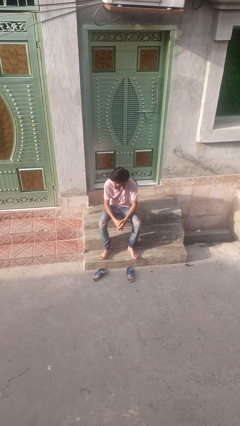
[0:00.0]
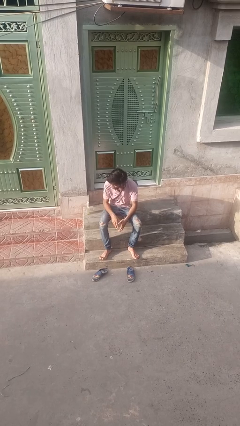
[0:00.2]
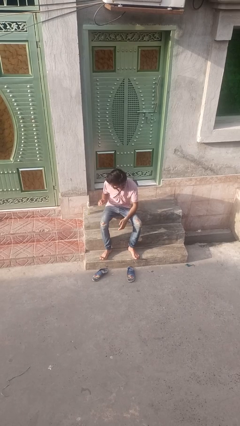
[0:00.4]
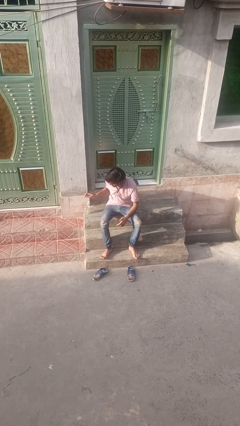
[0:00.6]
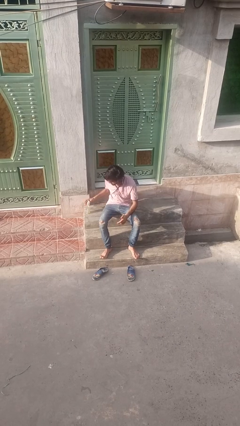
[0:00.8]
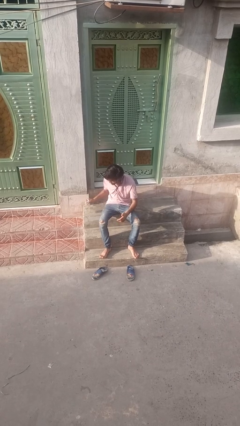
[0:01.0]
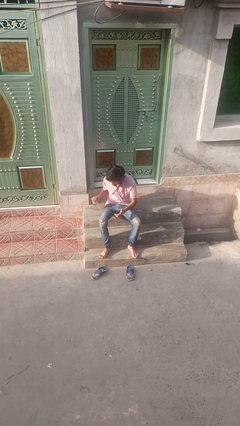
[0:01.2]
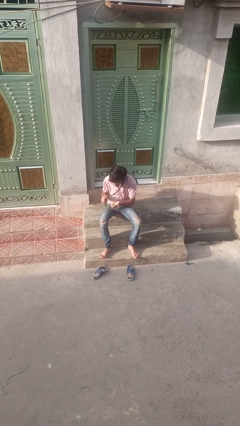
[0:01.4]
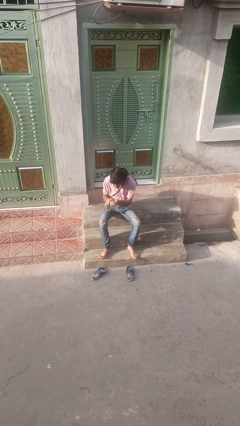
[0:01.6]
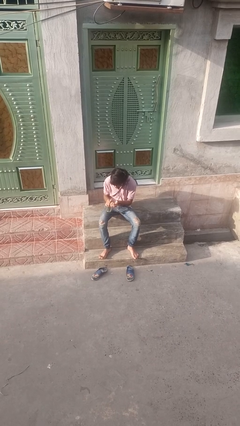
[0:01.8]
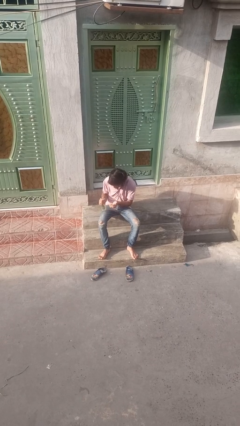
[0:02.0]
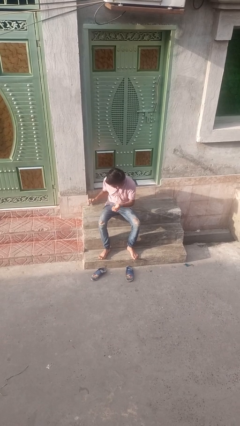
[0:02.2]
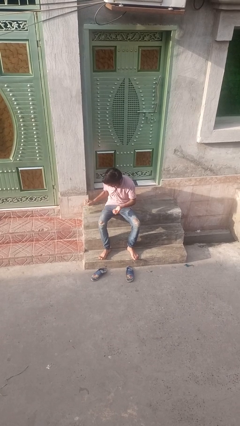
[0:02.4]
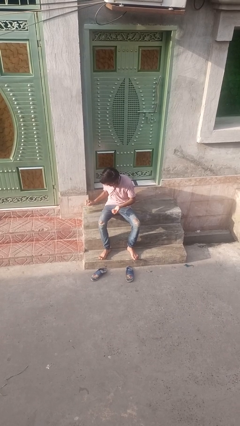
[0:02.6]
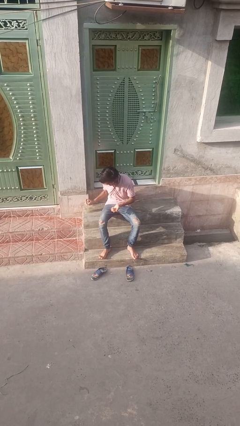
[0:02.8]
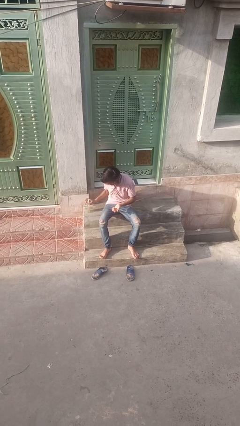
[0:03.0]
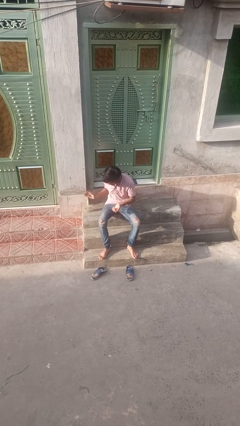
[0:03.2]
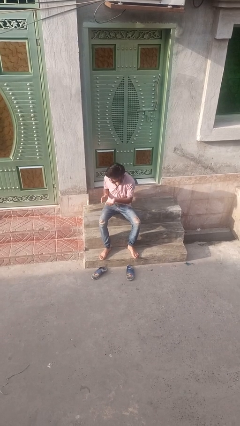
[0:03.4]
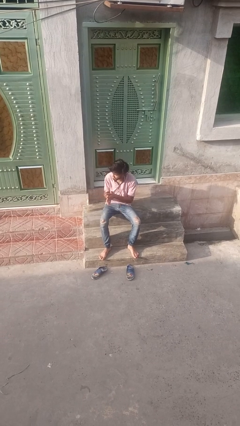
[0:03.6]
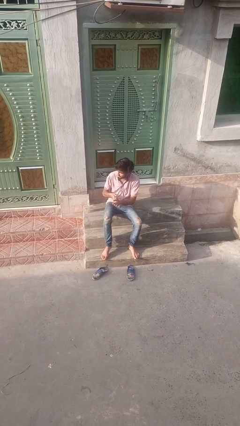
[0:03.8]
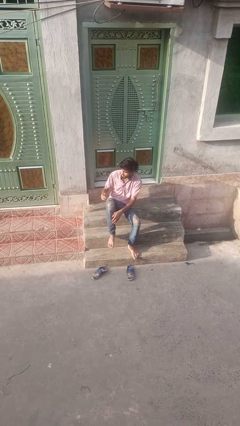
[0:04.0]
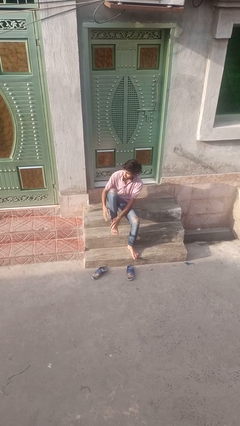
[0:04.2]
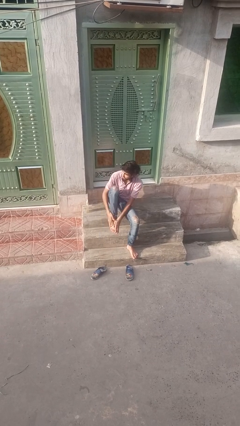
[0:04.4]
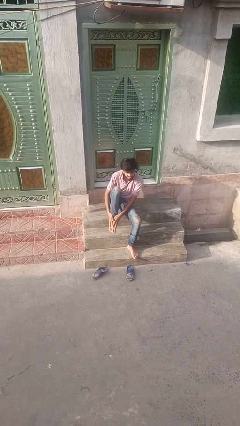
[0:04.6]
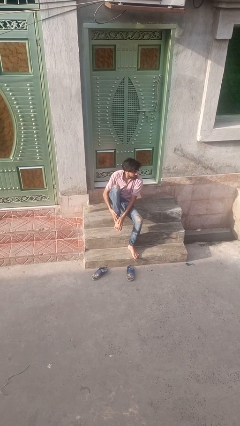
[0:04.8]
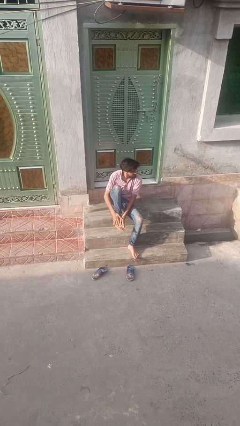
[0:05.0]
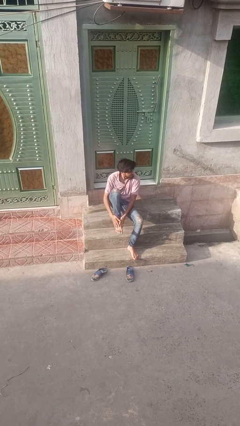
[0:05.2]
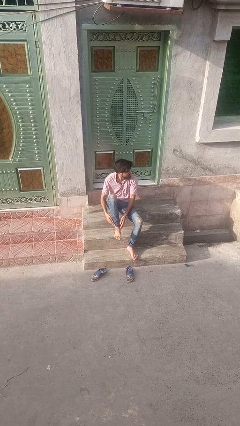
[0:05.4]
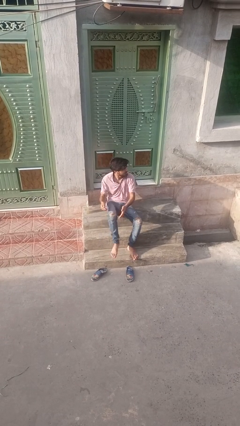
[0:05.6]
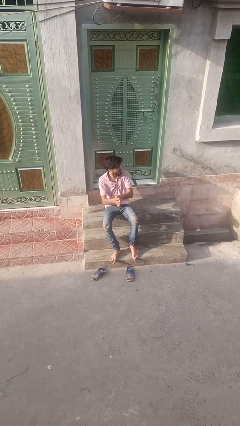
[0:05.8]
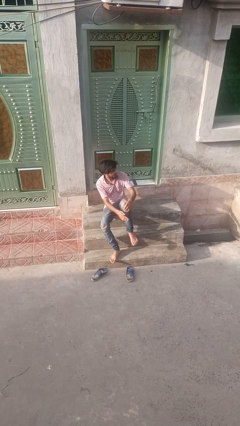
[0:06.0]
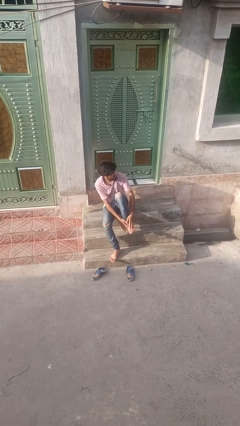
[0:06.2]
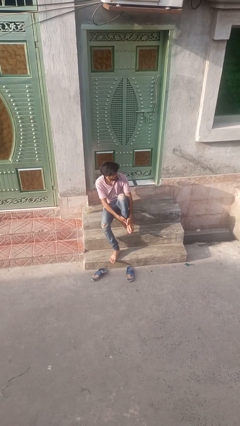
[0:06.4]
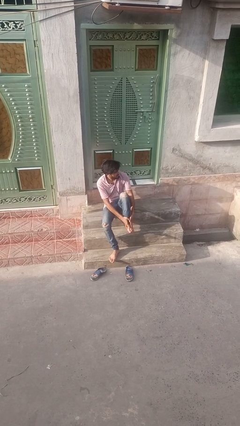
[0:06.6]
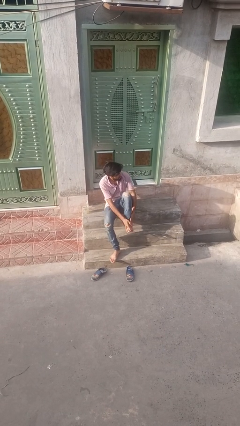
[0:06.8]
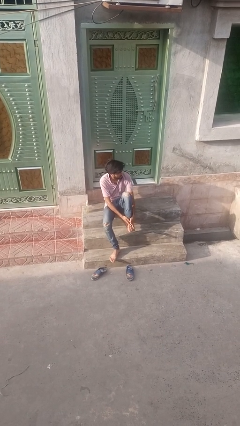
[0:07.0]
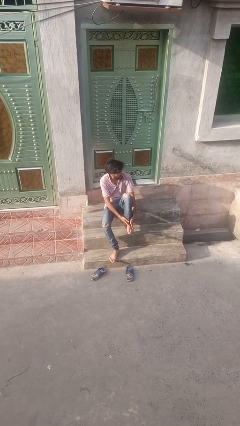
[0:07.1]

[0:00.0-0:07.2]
person applies facial moisturizer

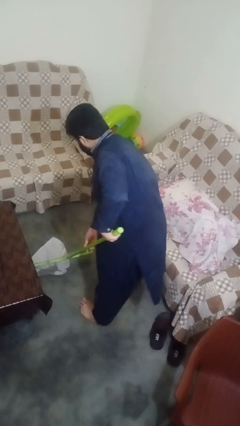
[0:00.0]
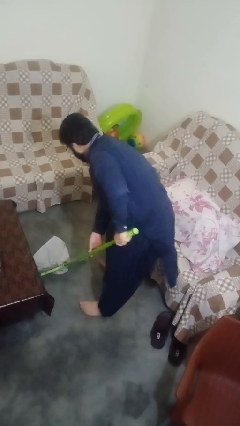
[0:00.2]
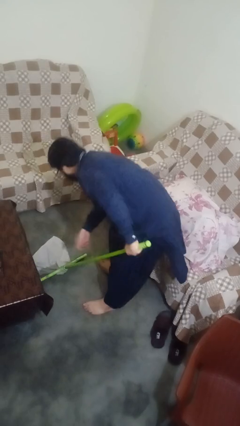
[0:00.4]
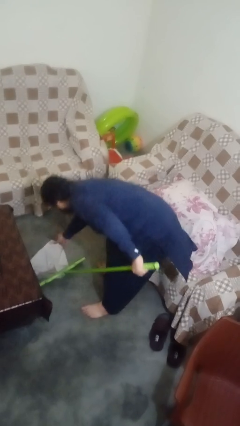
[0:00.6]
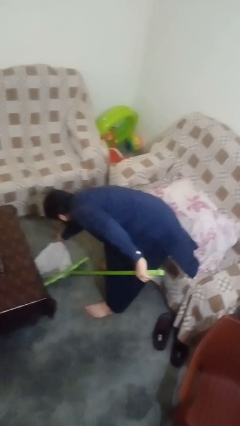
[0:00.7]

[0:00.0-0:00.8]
person mops

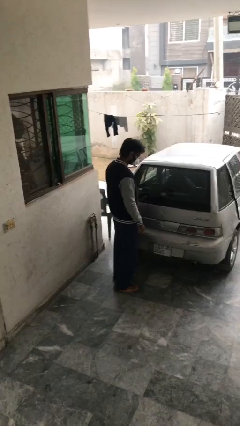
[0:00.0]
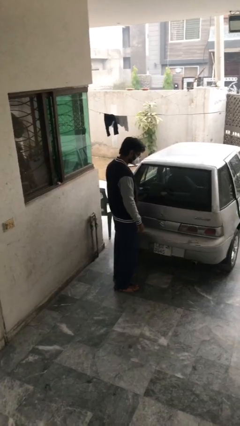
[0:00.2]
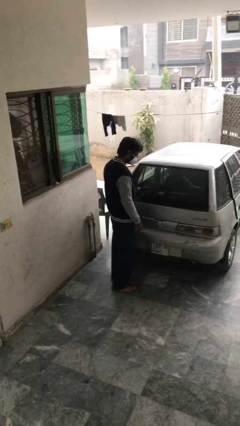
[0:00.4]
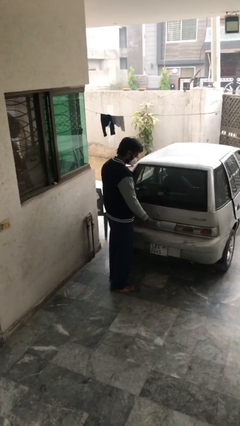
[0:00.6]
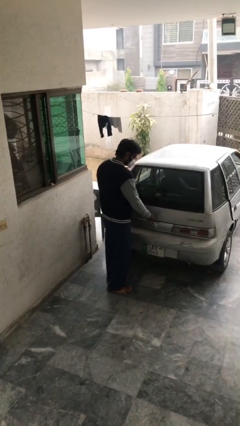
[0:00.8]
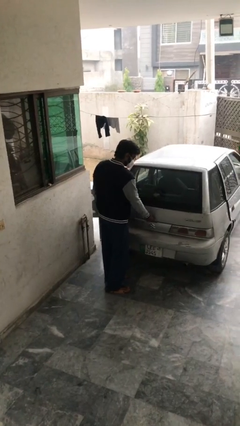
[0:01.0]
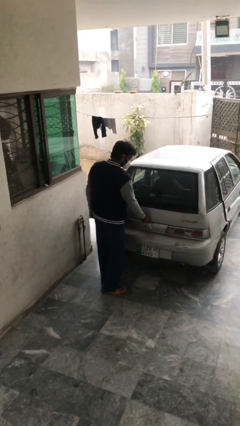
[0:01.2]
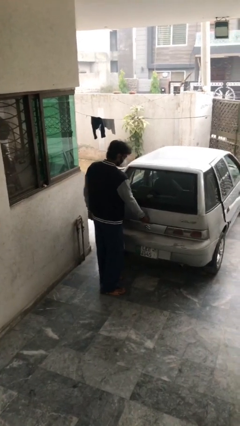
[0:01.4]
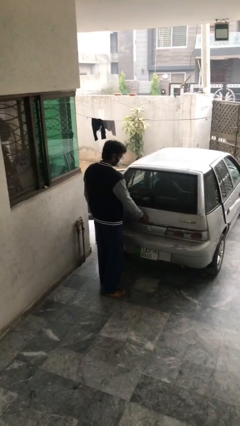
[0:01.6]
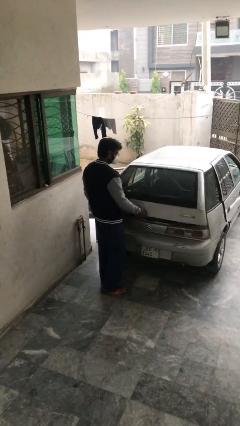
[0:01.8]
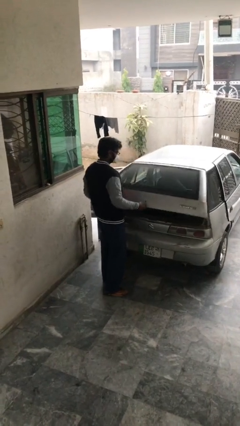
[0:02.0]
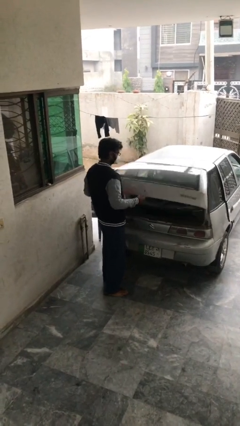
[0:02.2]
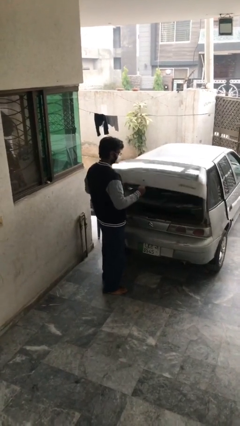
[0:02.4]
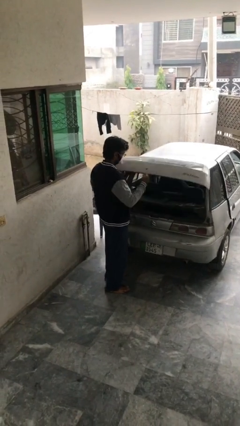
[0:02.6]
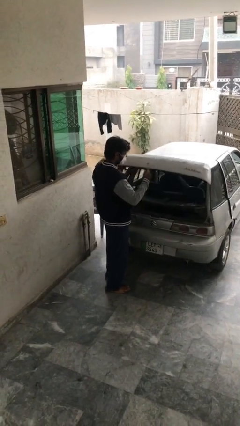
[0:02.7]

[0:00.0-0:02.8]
person opens car trunk

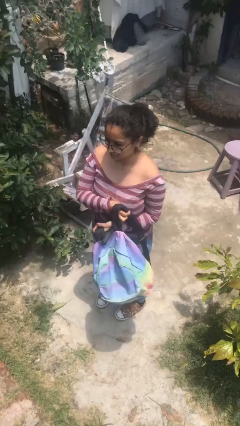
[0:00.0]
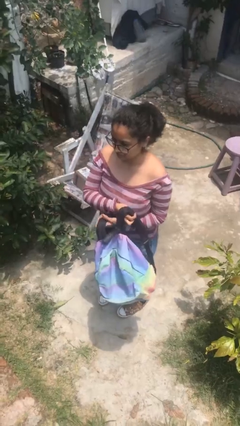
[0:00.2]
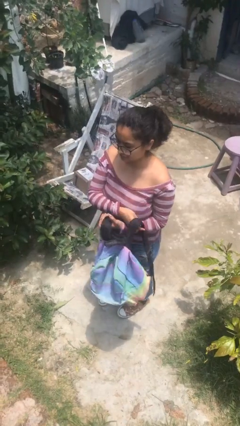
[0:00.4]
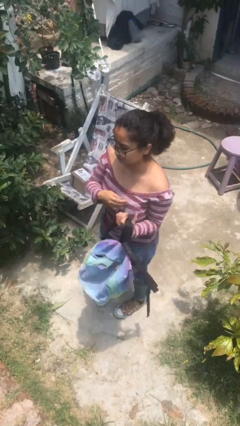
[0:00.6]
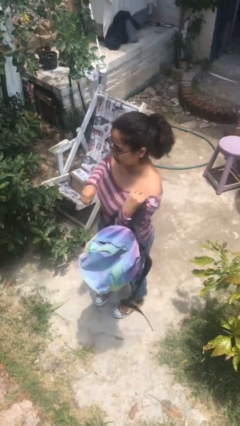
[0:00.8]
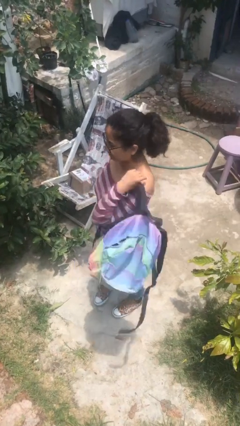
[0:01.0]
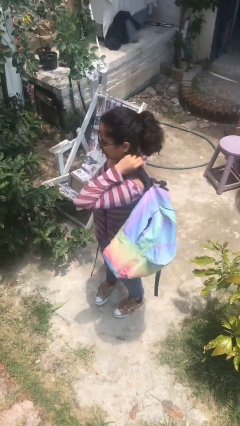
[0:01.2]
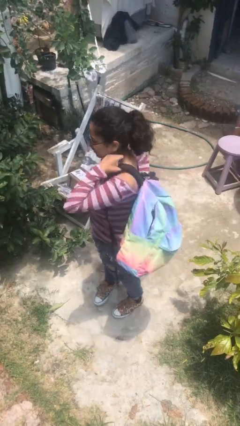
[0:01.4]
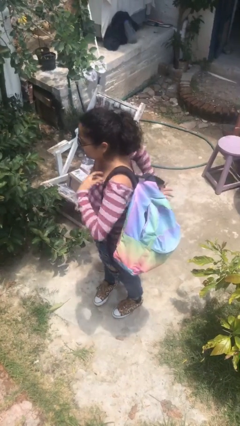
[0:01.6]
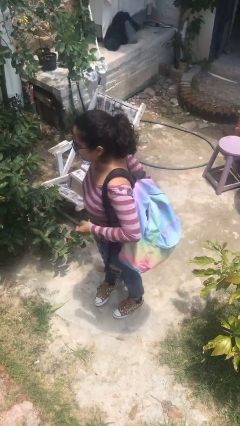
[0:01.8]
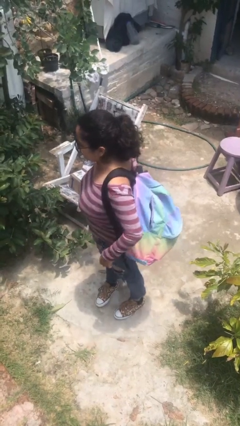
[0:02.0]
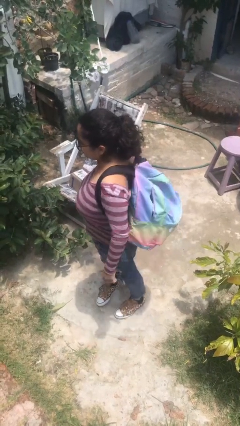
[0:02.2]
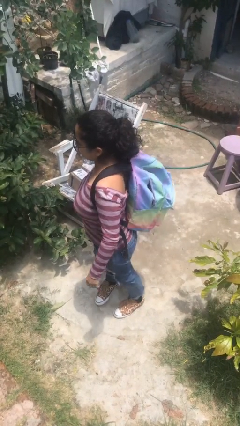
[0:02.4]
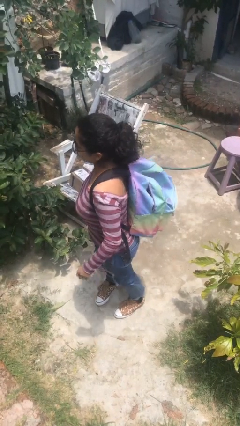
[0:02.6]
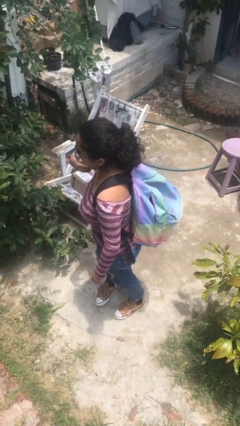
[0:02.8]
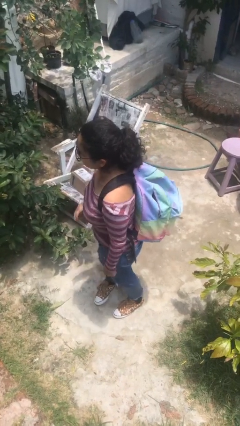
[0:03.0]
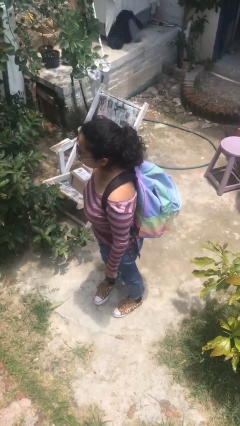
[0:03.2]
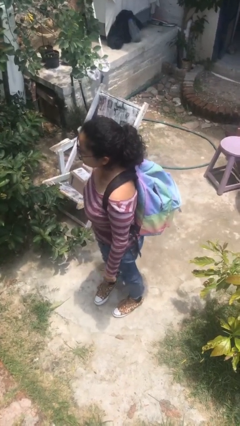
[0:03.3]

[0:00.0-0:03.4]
person puts on backpack

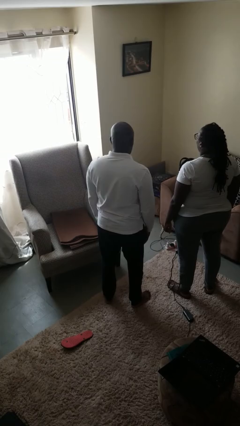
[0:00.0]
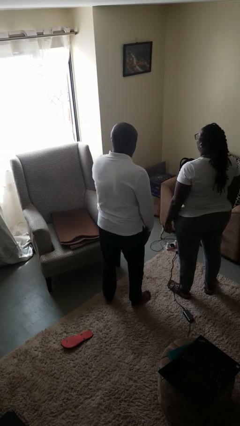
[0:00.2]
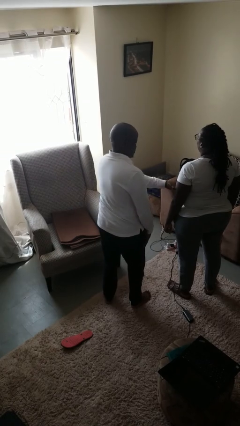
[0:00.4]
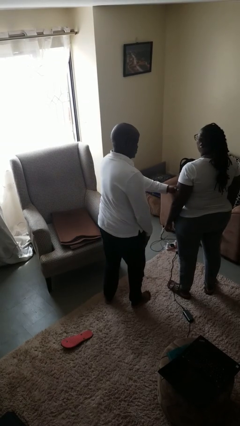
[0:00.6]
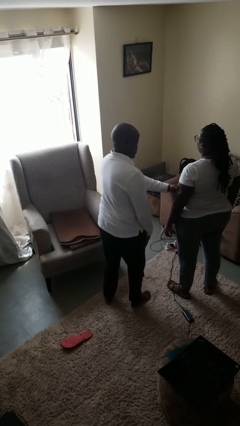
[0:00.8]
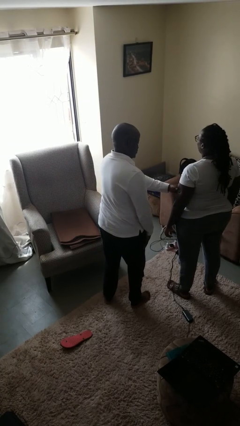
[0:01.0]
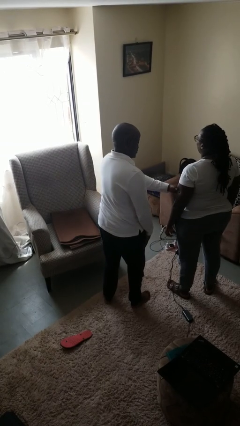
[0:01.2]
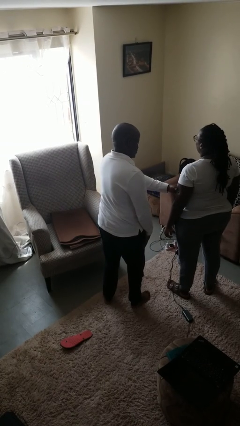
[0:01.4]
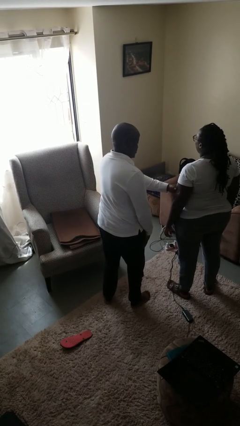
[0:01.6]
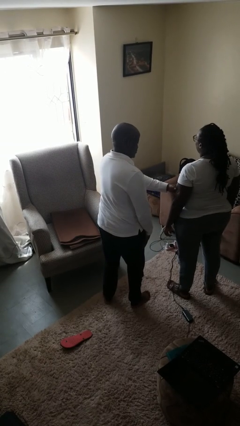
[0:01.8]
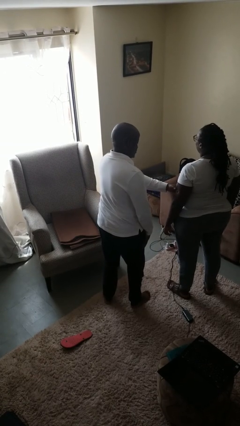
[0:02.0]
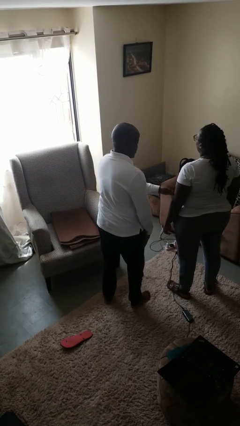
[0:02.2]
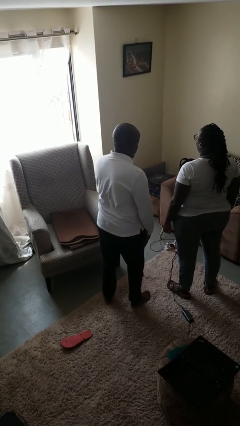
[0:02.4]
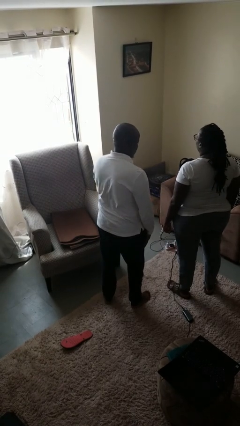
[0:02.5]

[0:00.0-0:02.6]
person grabs person by bicep

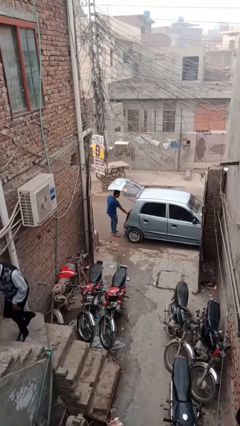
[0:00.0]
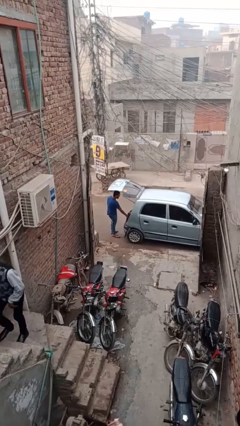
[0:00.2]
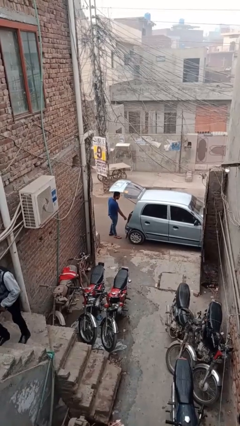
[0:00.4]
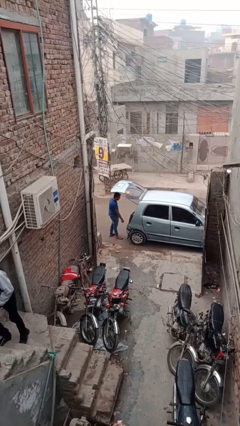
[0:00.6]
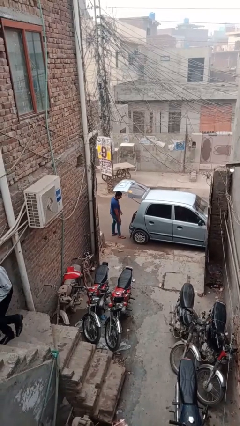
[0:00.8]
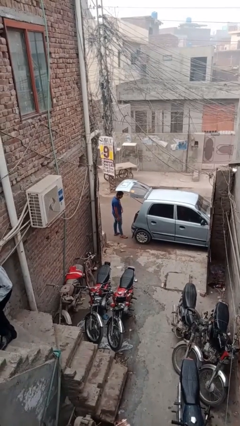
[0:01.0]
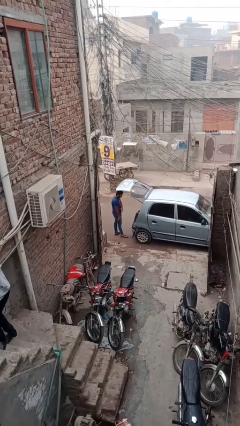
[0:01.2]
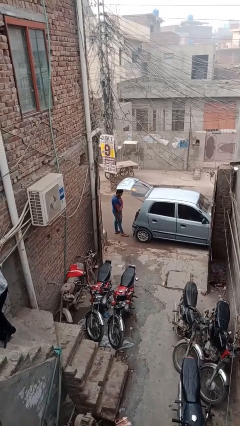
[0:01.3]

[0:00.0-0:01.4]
person loads car
